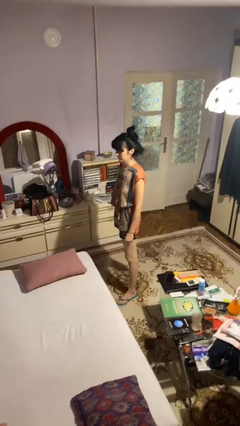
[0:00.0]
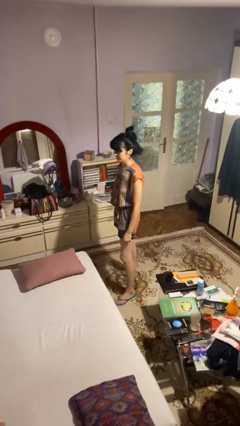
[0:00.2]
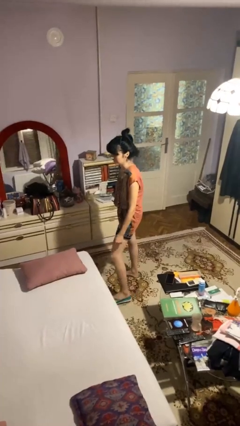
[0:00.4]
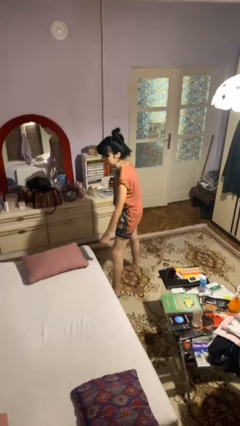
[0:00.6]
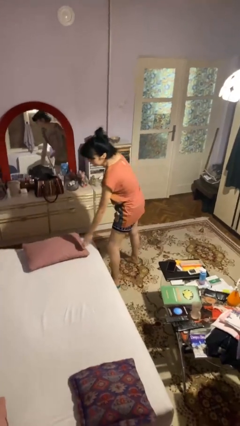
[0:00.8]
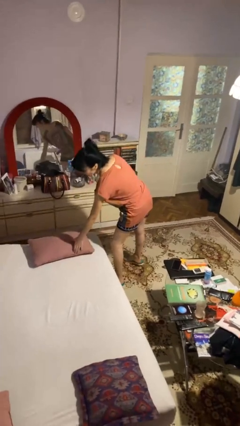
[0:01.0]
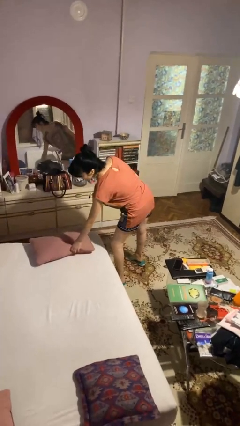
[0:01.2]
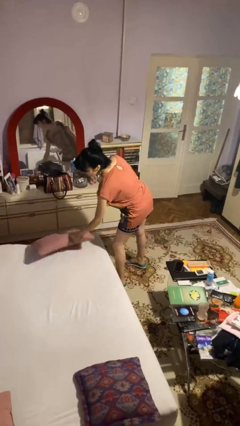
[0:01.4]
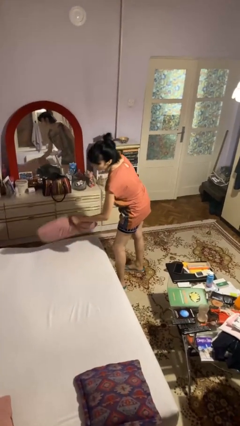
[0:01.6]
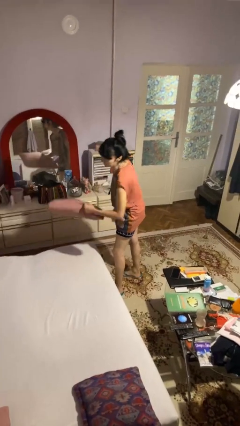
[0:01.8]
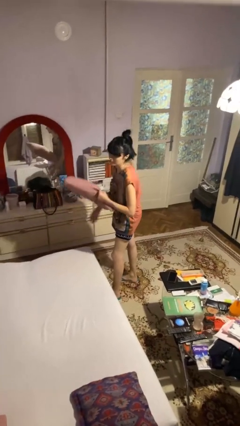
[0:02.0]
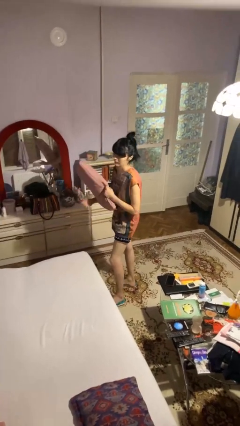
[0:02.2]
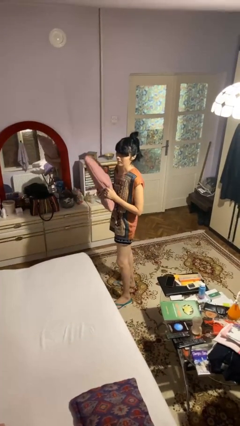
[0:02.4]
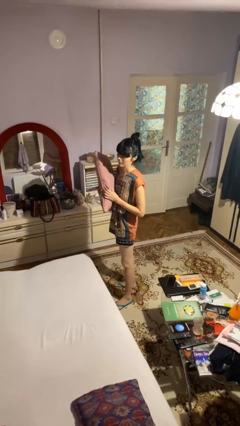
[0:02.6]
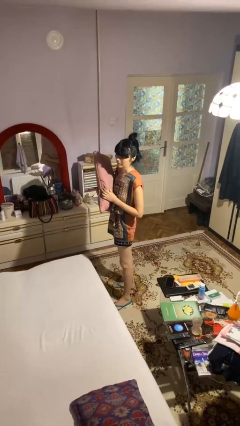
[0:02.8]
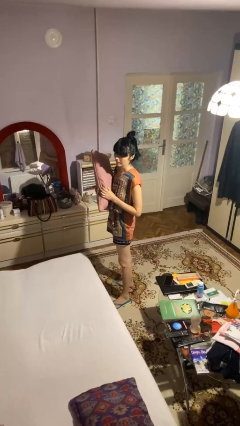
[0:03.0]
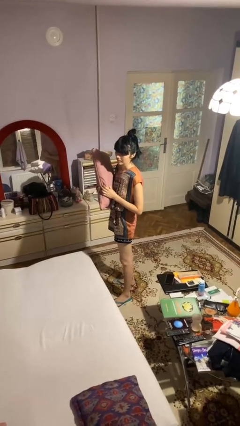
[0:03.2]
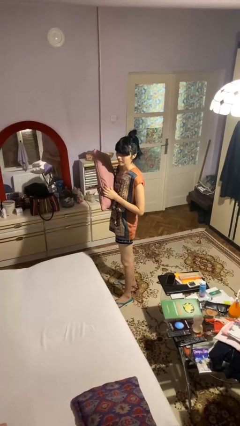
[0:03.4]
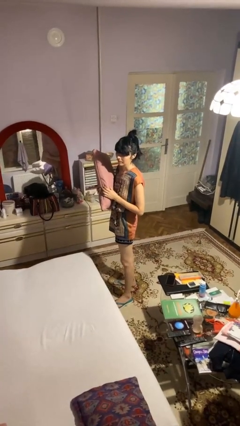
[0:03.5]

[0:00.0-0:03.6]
person picks up object from bed

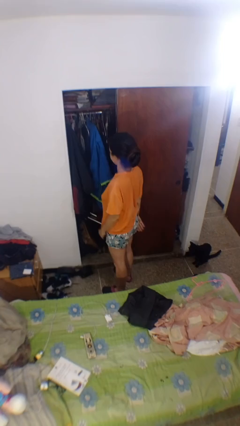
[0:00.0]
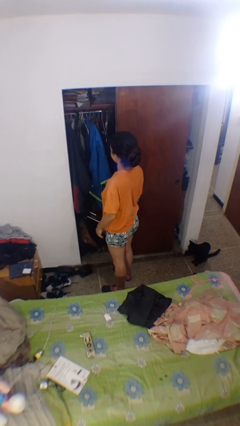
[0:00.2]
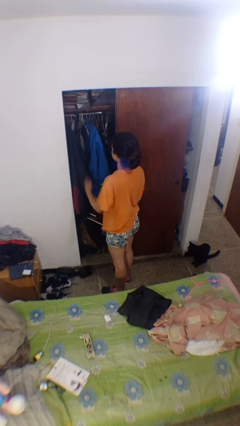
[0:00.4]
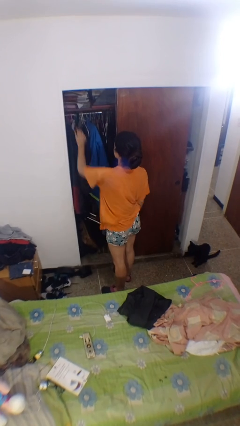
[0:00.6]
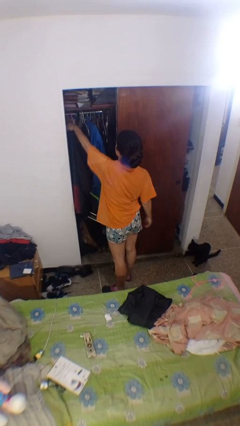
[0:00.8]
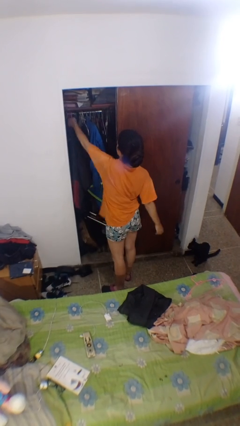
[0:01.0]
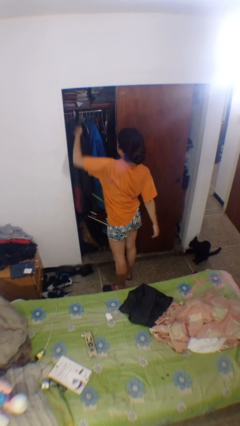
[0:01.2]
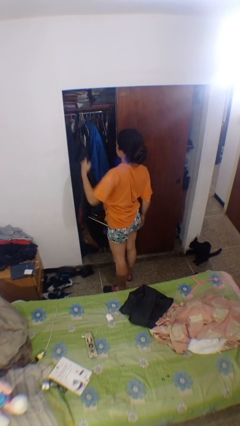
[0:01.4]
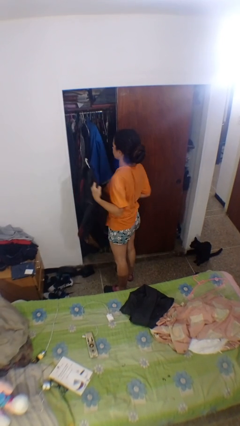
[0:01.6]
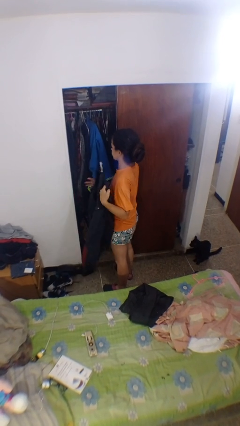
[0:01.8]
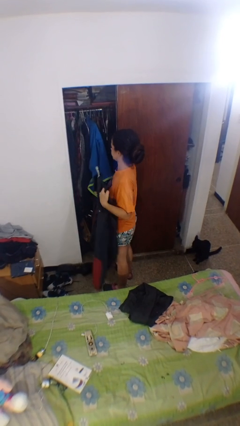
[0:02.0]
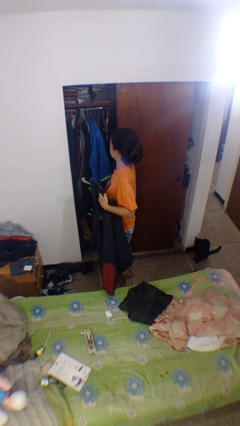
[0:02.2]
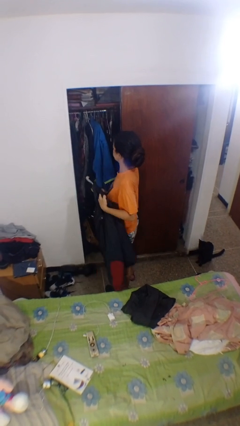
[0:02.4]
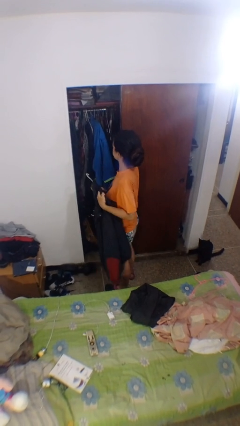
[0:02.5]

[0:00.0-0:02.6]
person takes clothes from closet

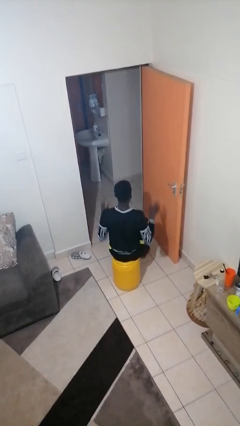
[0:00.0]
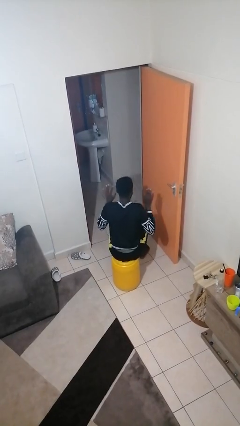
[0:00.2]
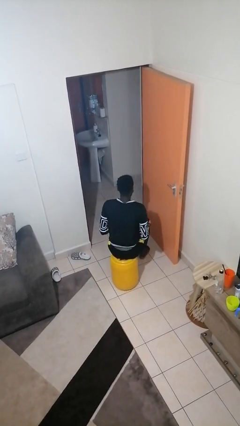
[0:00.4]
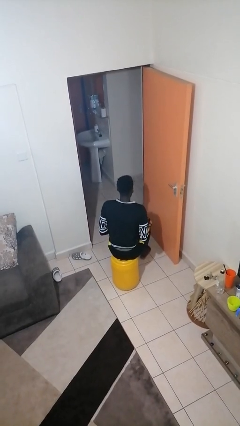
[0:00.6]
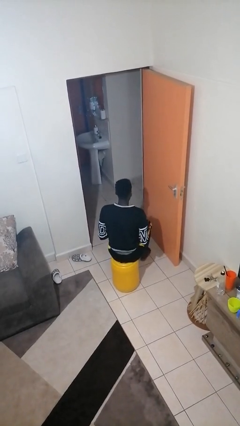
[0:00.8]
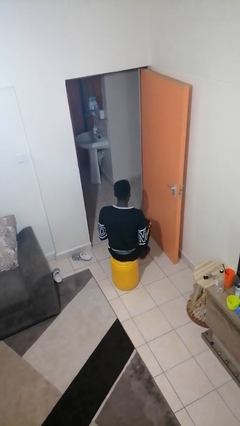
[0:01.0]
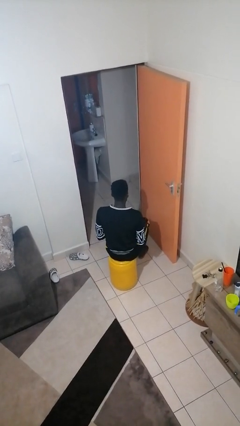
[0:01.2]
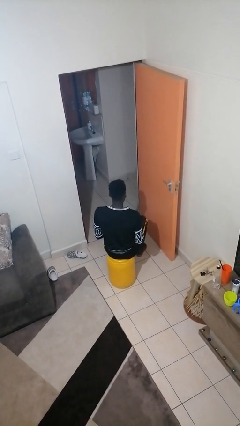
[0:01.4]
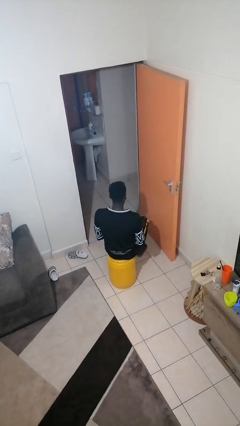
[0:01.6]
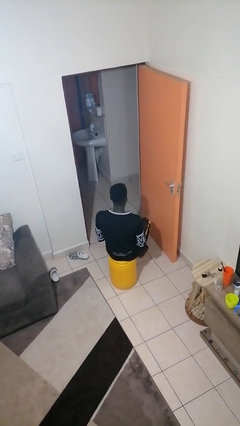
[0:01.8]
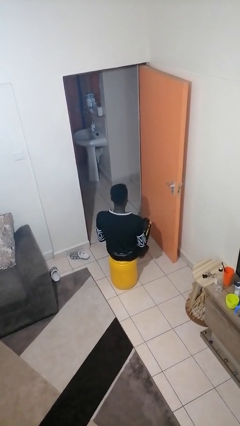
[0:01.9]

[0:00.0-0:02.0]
person slaps hands on thighs

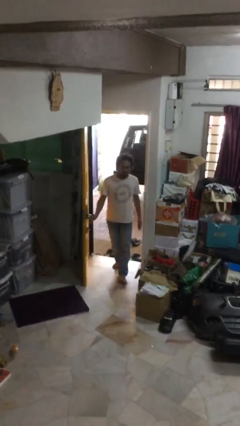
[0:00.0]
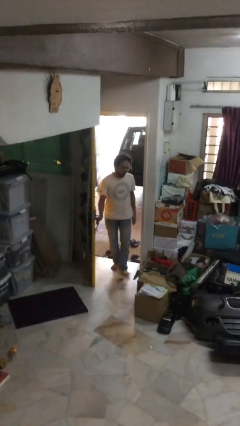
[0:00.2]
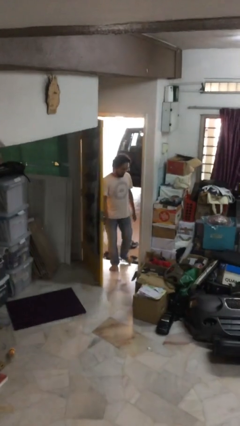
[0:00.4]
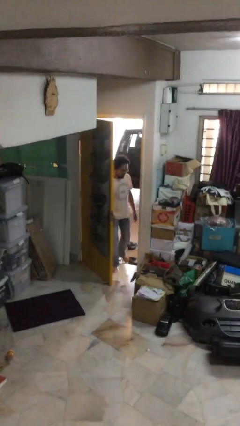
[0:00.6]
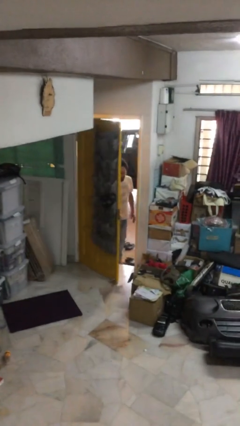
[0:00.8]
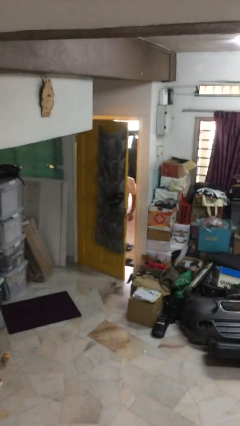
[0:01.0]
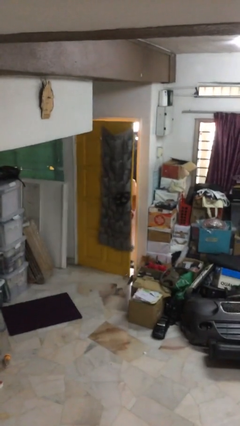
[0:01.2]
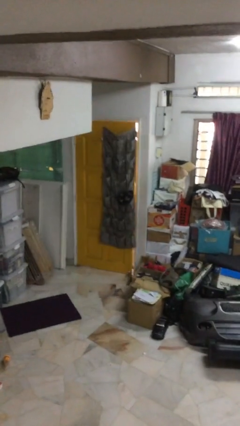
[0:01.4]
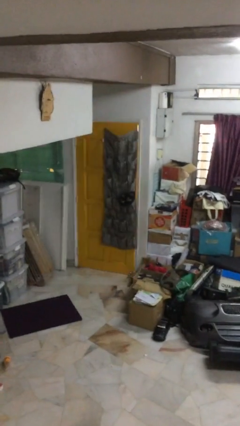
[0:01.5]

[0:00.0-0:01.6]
person closes facility door

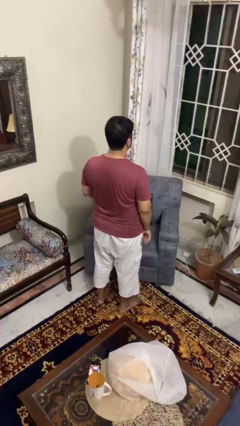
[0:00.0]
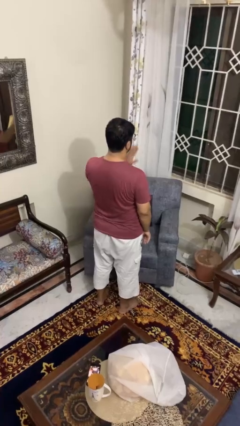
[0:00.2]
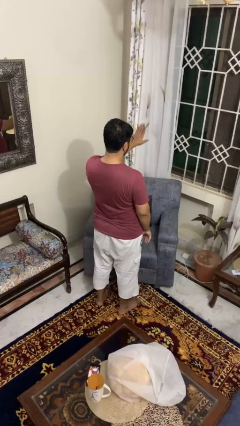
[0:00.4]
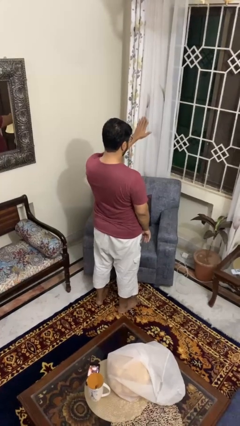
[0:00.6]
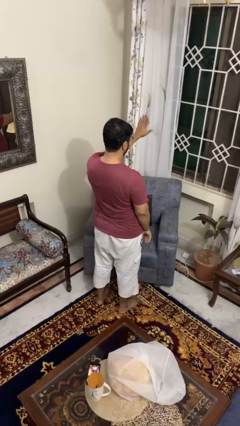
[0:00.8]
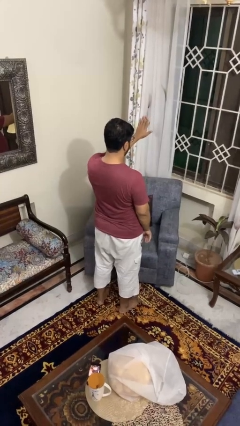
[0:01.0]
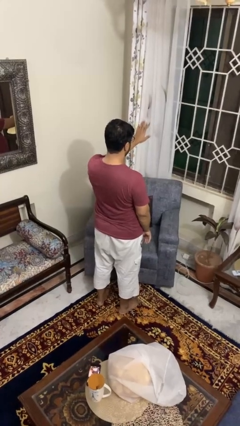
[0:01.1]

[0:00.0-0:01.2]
person gestures stop

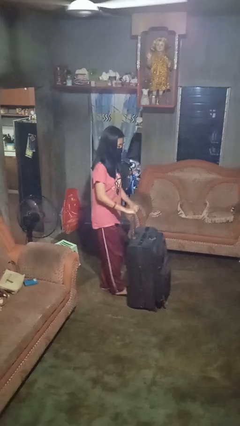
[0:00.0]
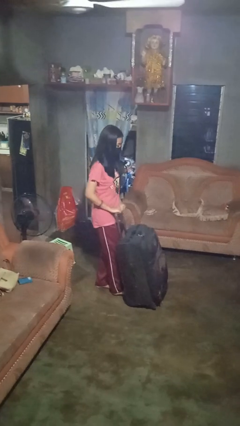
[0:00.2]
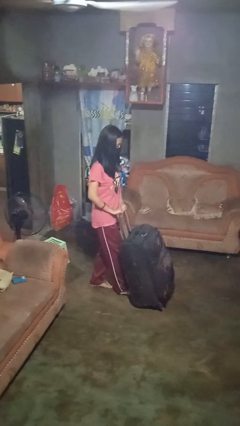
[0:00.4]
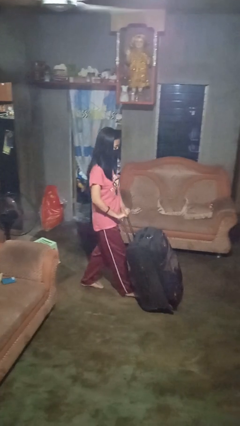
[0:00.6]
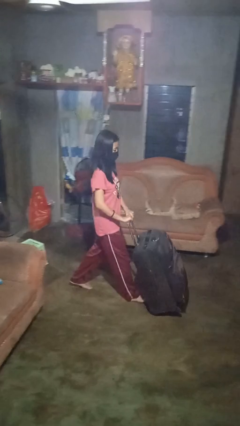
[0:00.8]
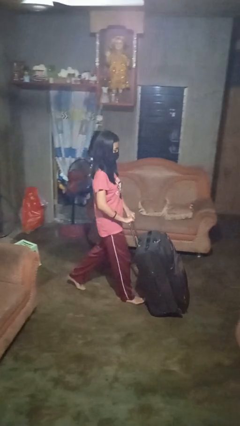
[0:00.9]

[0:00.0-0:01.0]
person pushes wheeled cart

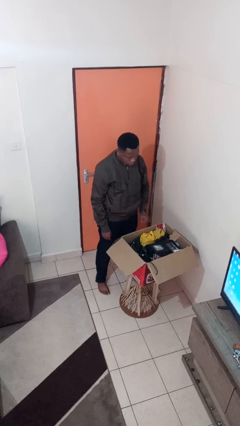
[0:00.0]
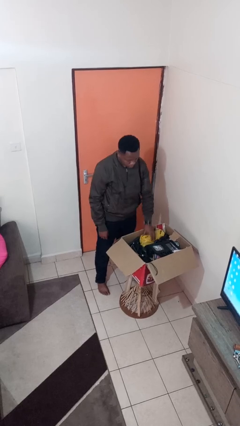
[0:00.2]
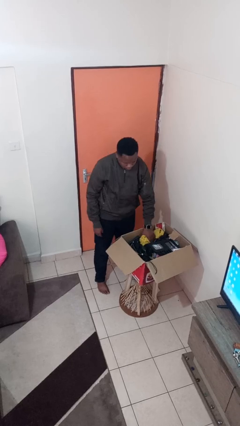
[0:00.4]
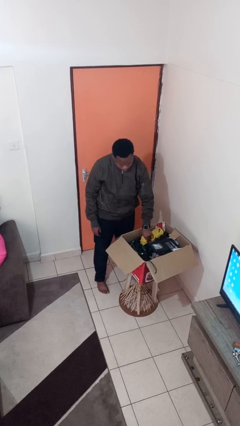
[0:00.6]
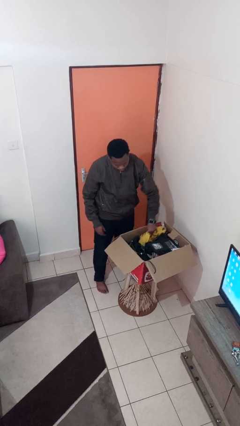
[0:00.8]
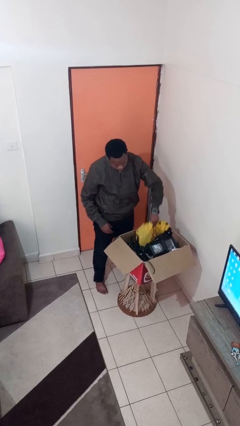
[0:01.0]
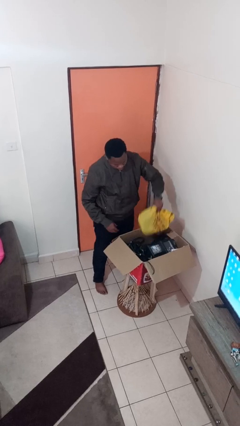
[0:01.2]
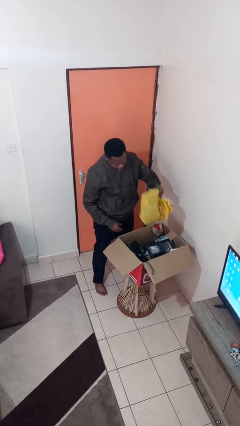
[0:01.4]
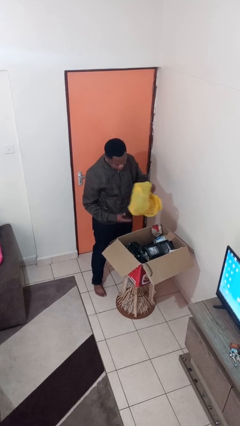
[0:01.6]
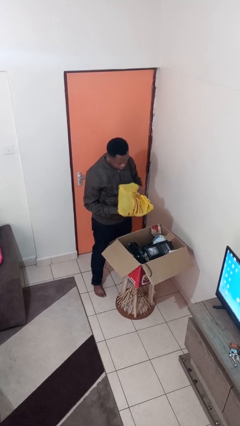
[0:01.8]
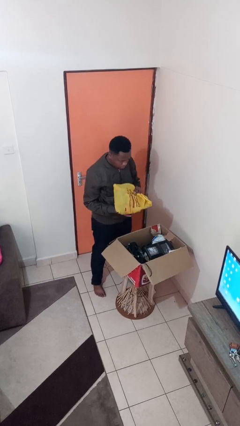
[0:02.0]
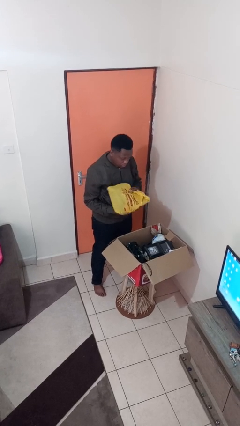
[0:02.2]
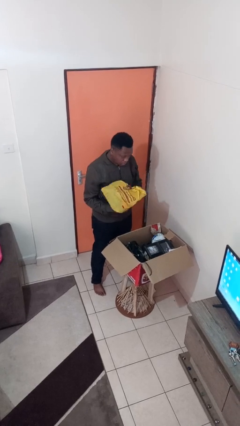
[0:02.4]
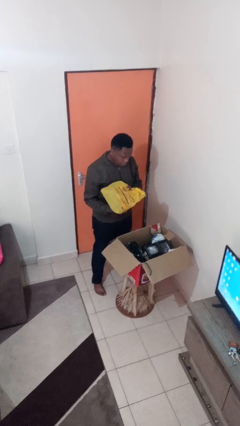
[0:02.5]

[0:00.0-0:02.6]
person takes object from box

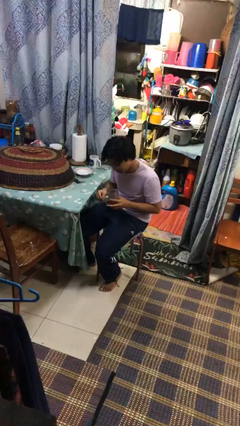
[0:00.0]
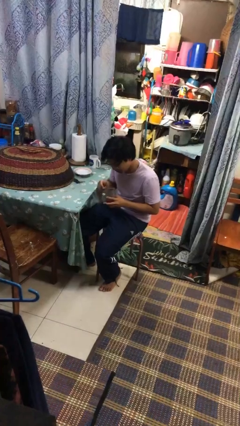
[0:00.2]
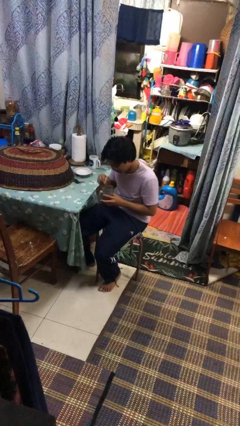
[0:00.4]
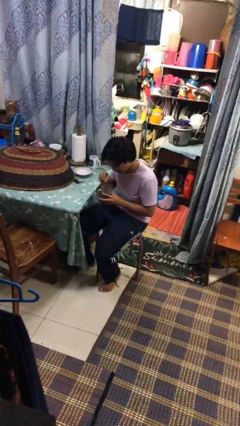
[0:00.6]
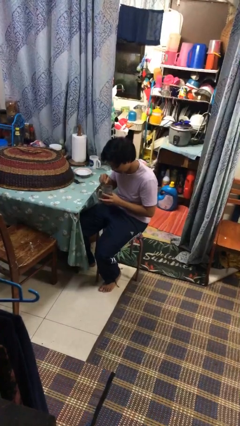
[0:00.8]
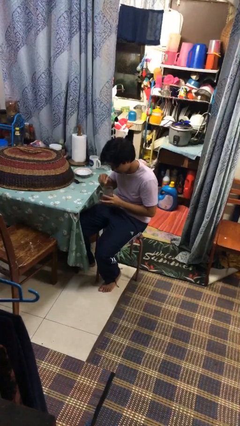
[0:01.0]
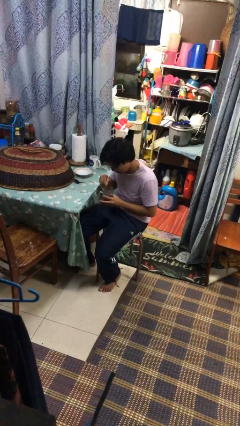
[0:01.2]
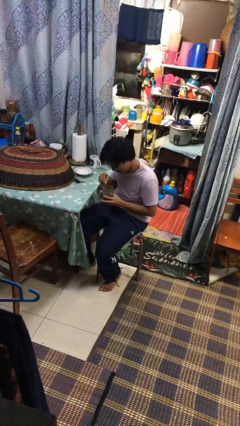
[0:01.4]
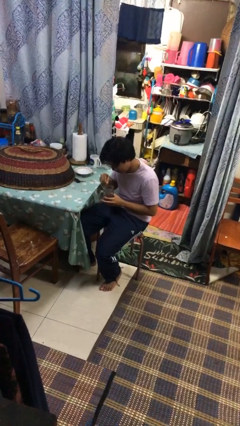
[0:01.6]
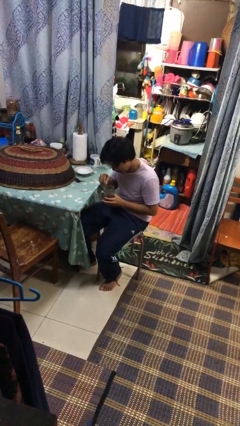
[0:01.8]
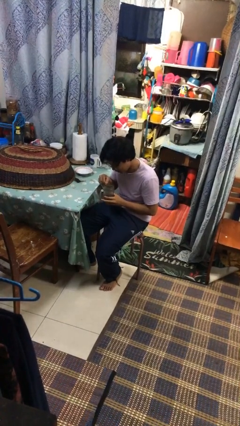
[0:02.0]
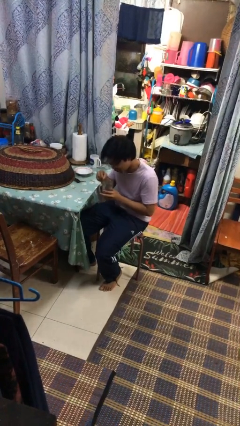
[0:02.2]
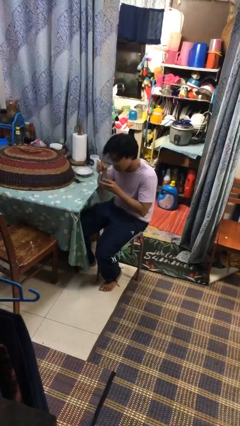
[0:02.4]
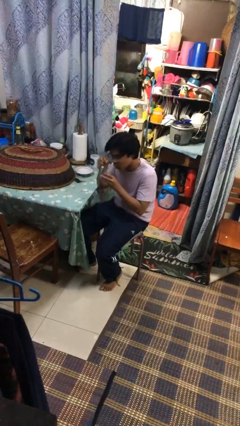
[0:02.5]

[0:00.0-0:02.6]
person stirs mug
